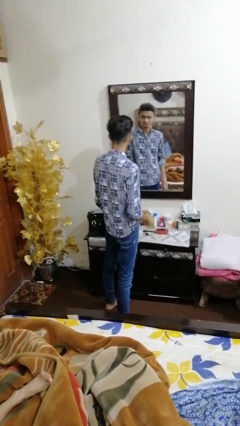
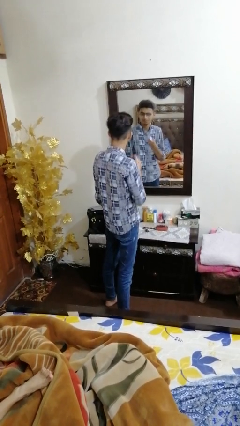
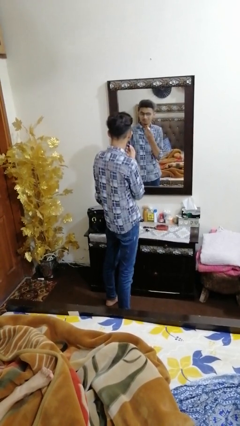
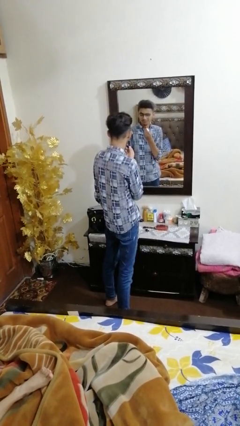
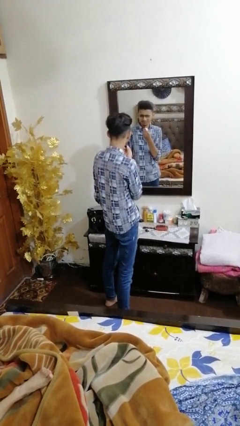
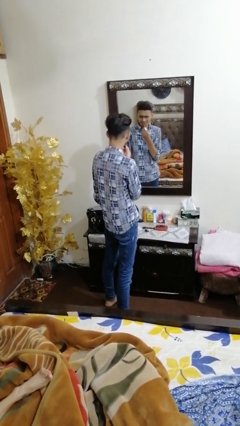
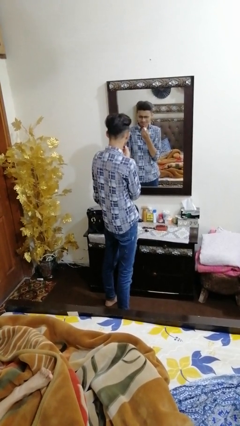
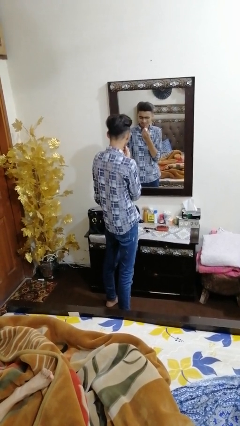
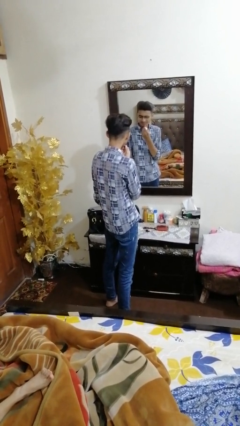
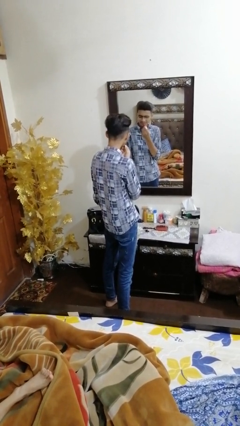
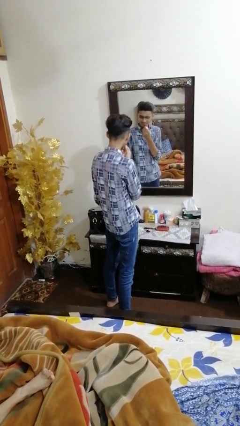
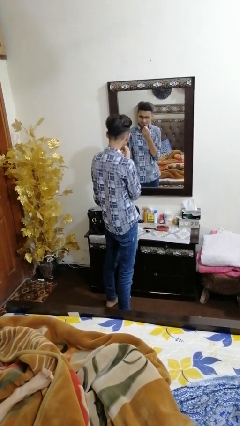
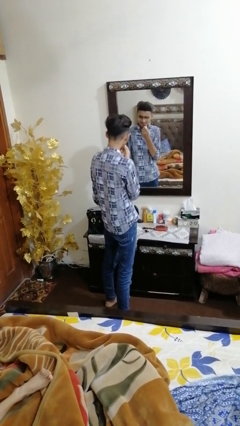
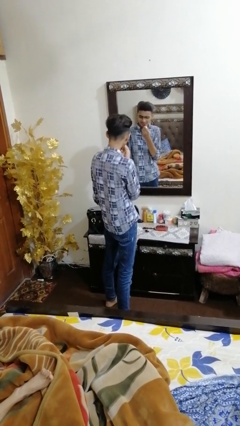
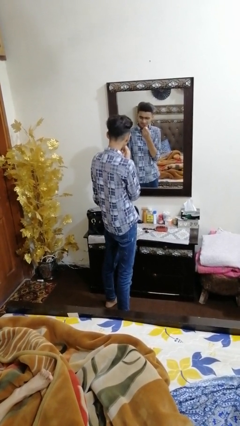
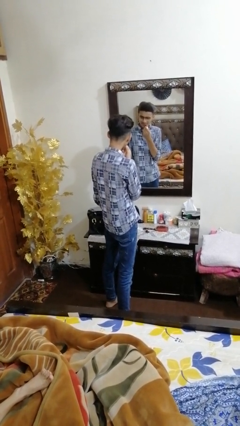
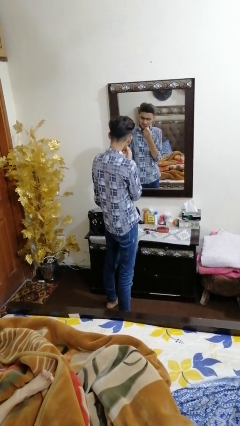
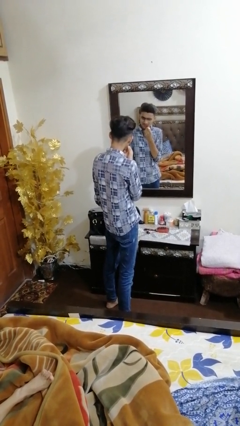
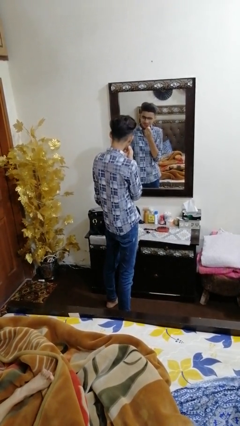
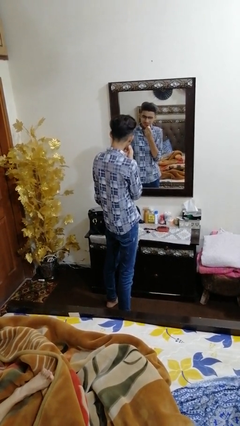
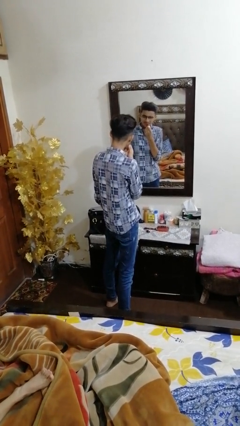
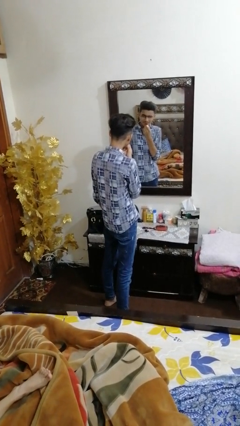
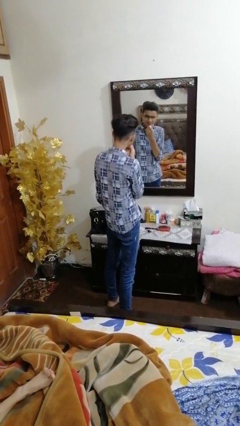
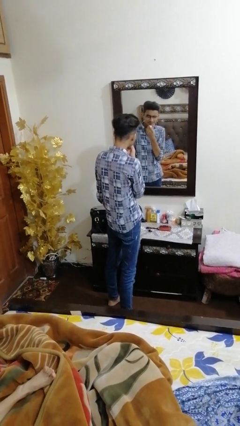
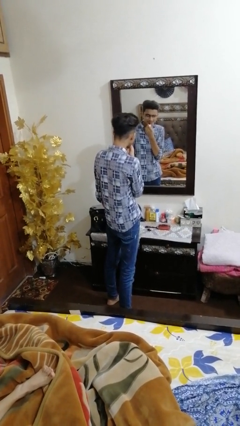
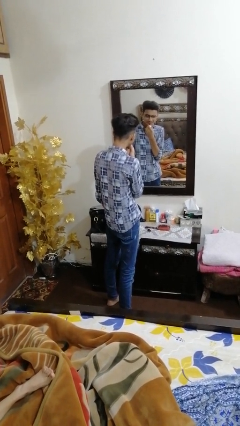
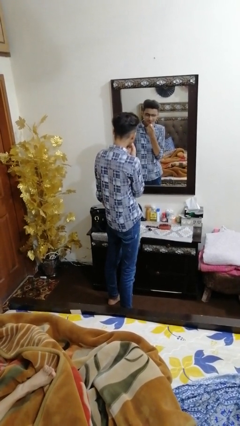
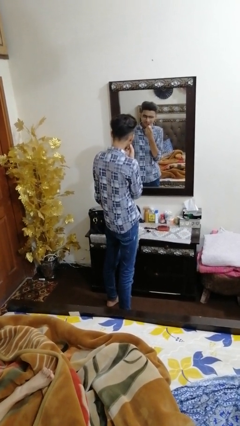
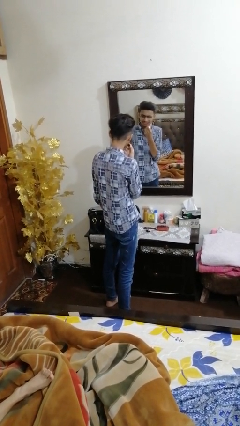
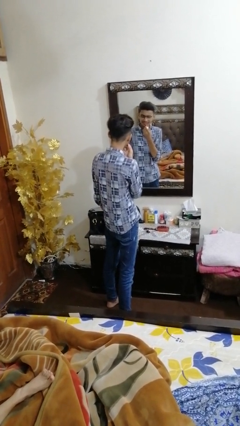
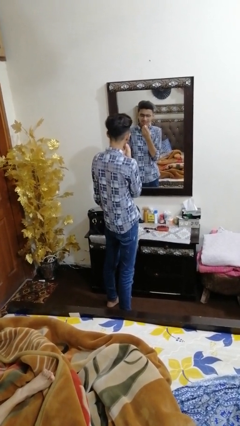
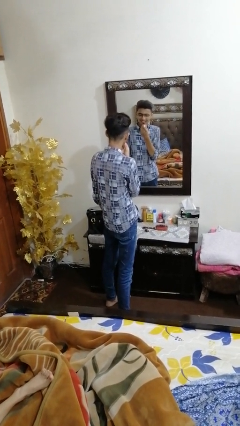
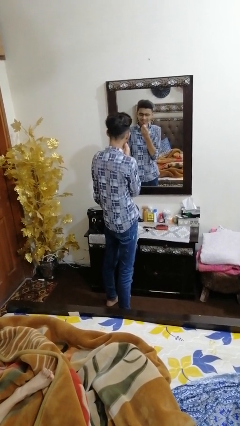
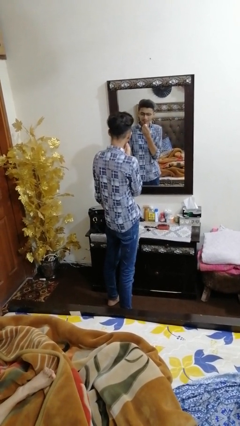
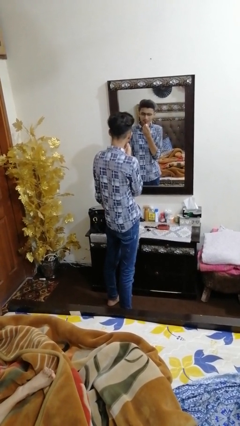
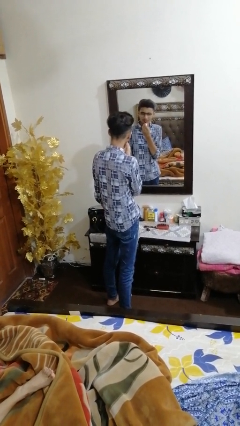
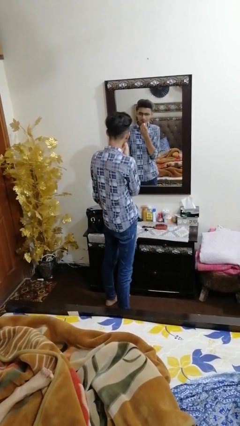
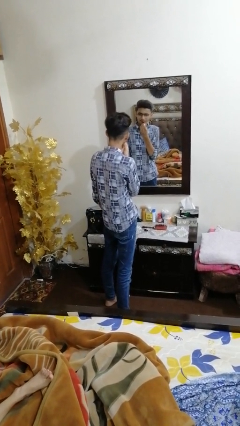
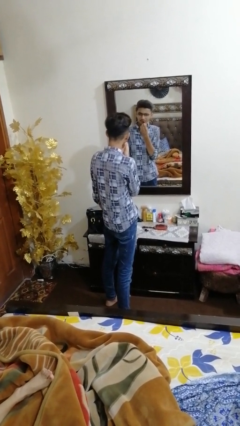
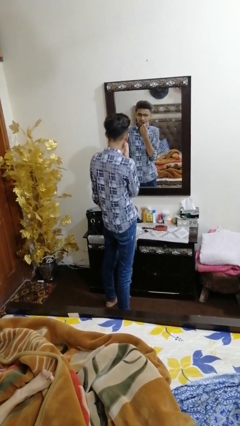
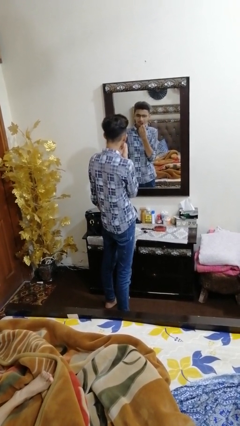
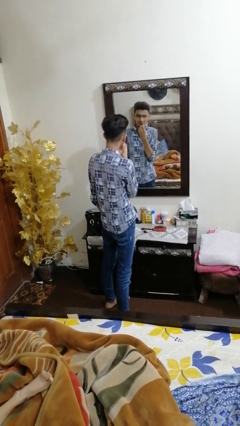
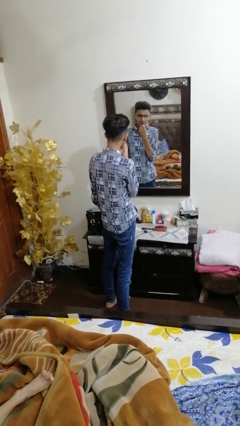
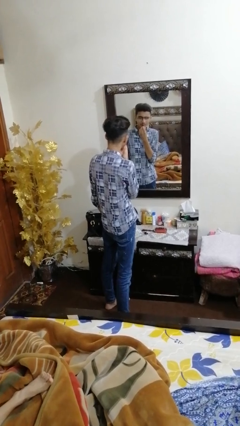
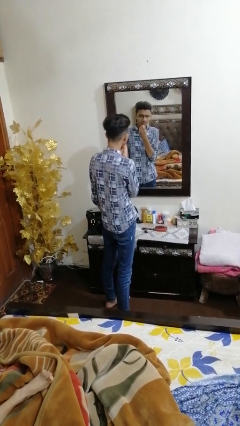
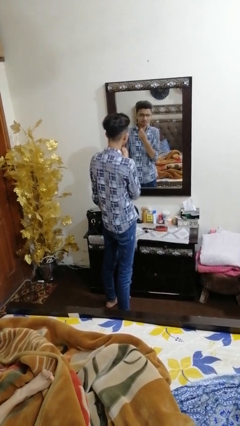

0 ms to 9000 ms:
person applies lip makeup

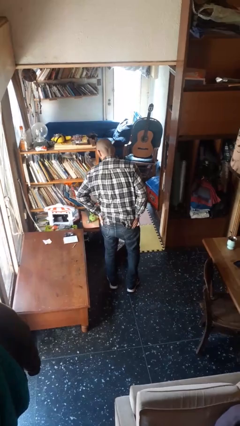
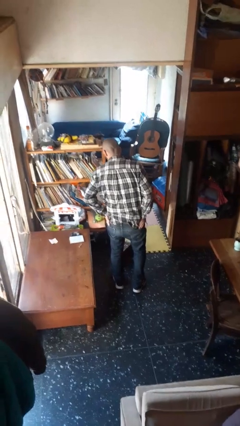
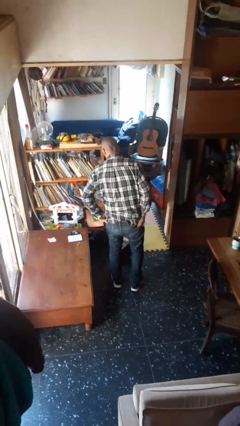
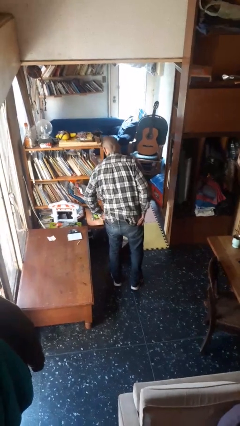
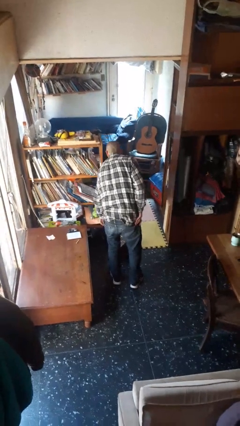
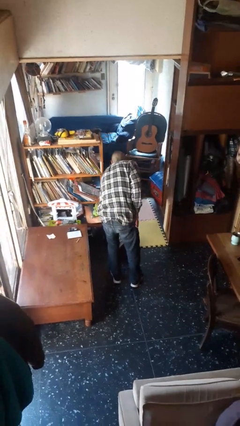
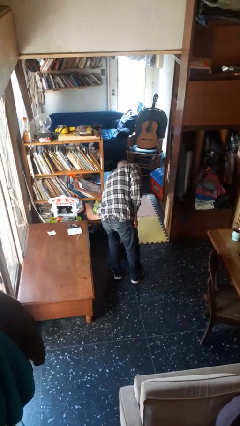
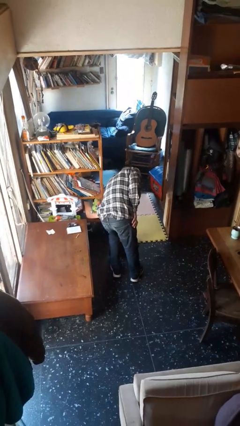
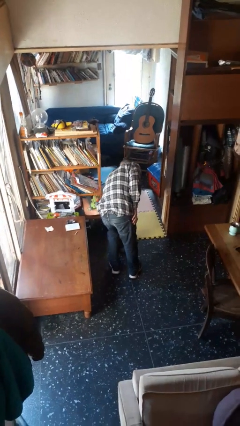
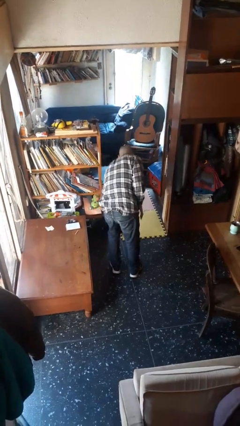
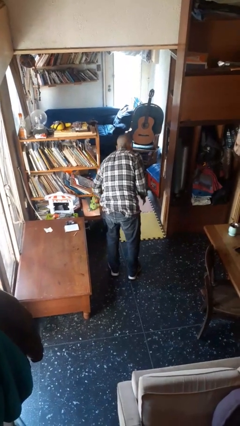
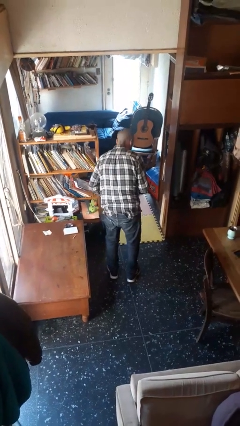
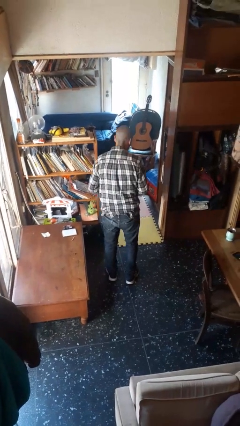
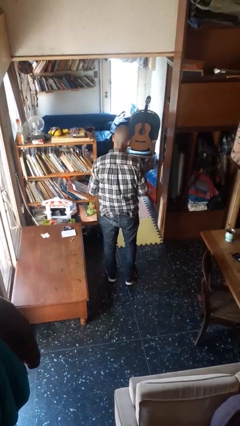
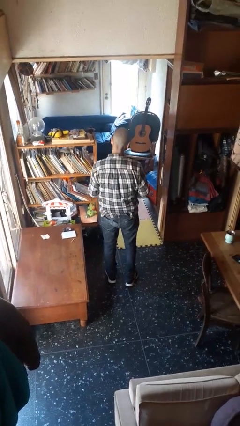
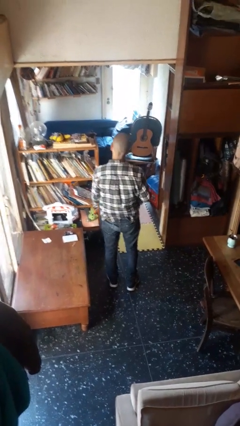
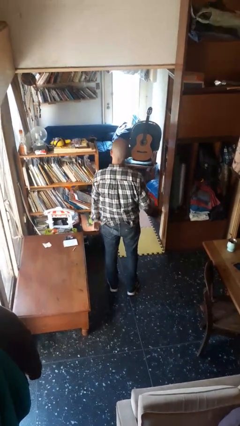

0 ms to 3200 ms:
person picks up object from floor

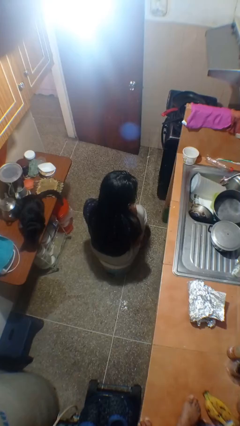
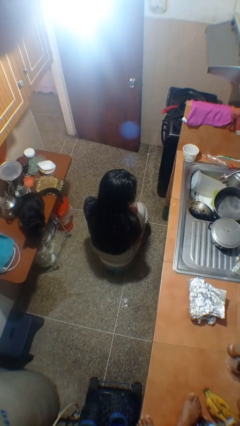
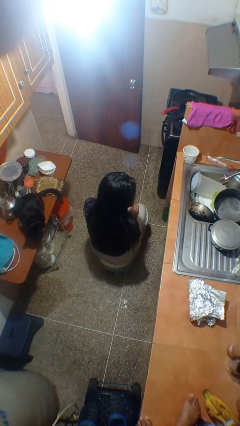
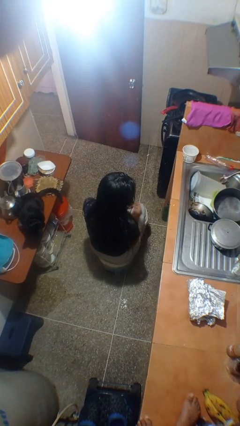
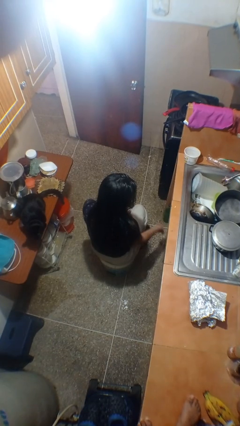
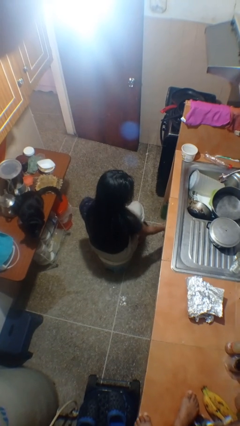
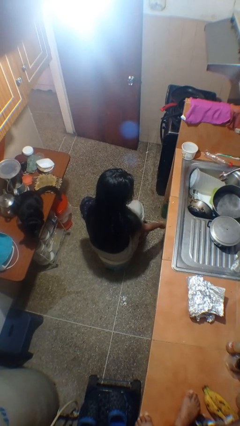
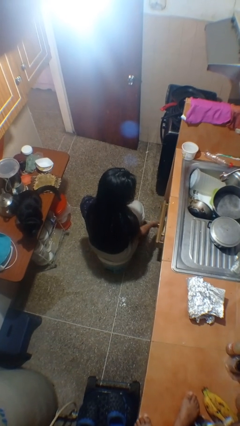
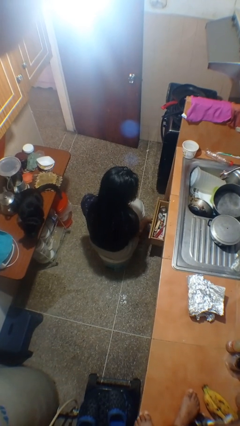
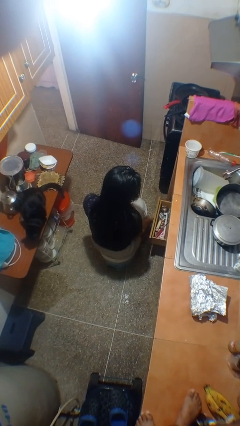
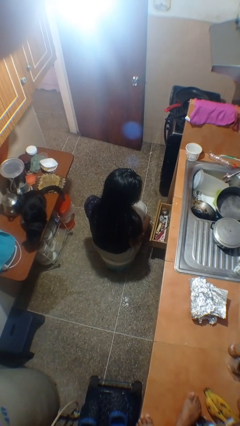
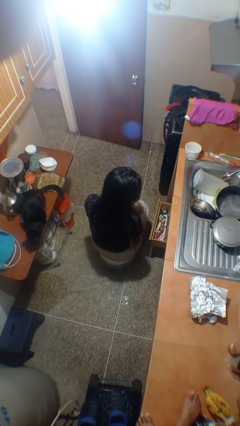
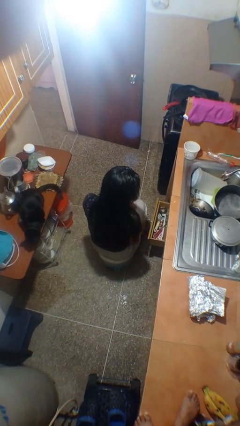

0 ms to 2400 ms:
person opens kitchen drawer

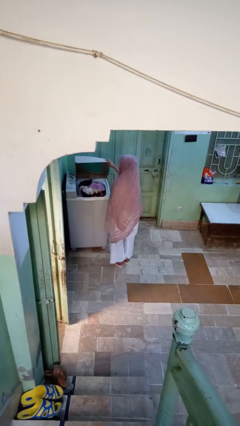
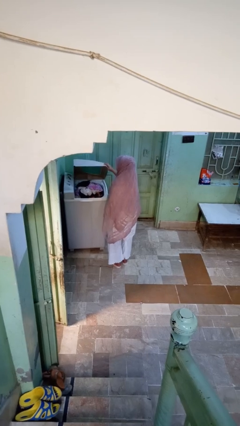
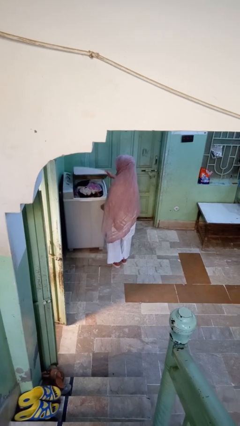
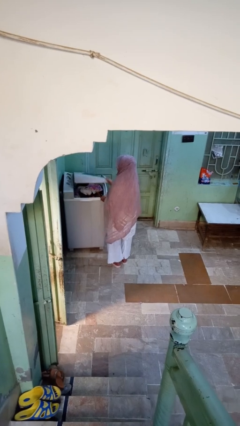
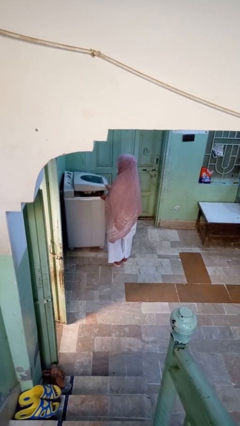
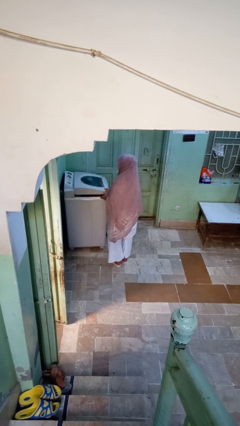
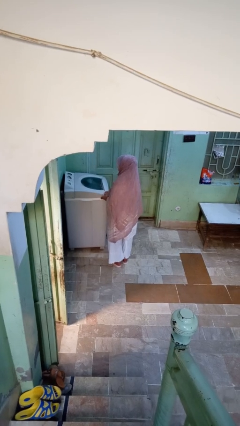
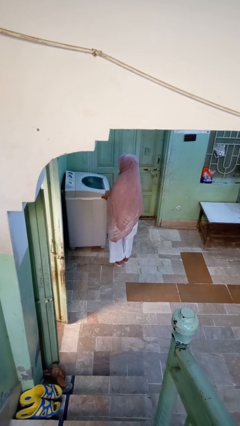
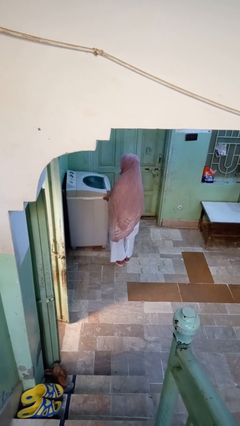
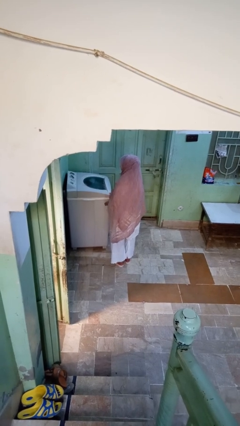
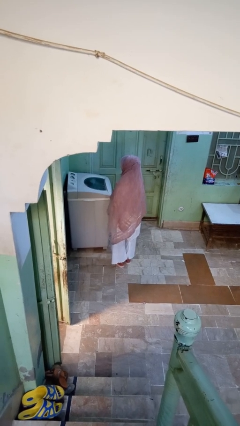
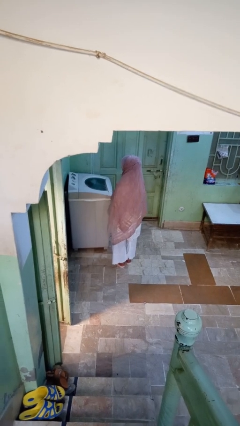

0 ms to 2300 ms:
person closes clothes washer

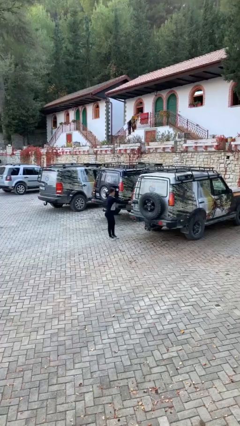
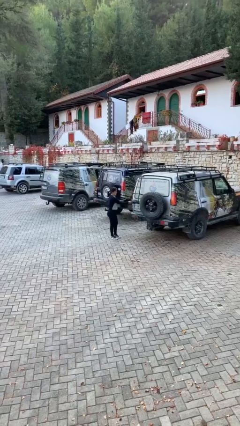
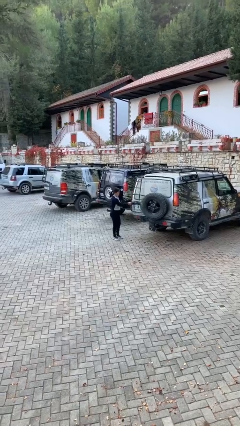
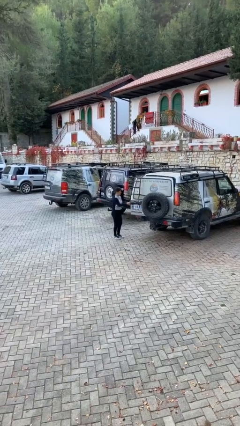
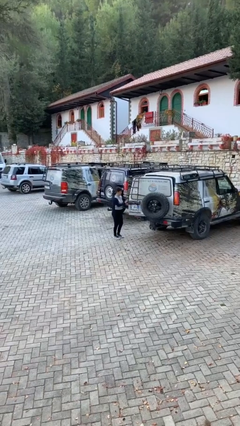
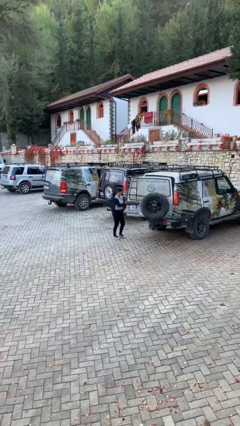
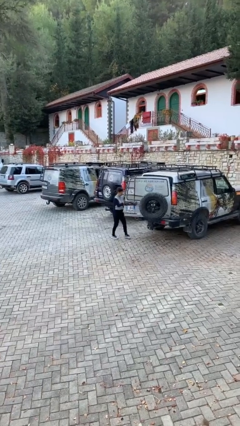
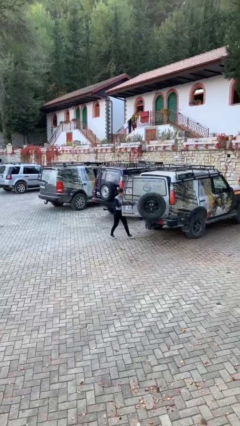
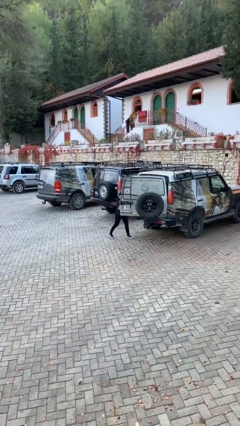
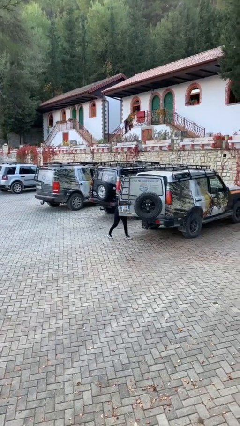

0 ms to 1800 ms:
person opens car trunk
